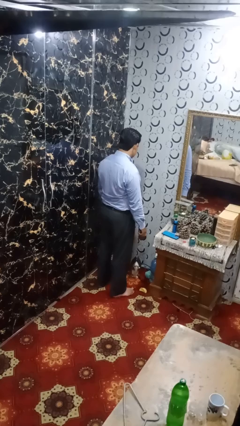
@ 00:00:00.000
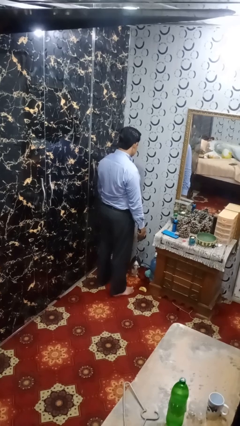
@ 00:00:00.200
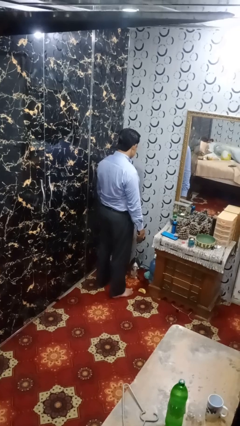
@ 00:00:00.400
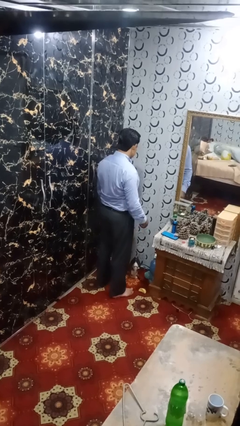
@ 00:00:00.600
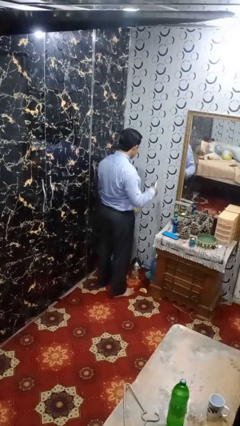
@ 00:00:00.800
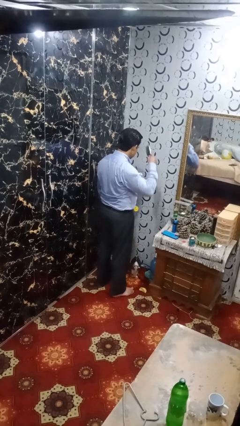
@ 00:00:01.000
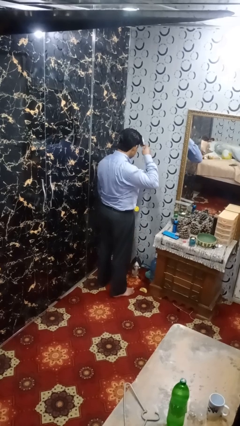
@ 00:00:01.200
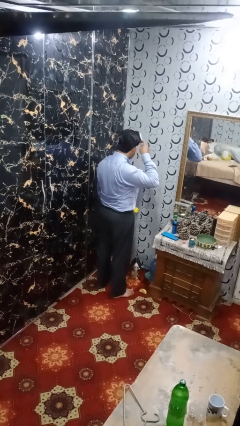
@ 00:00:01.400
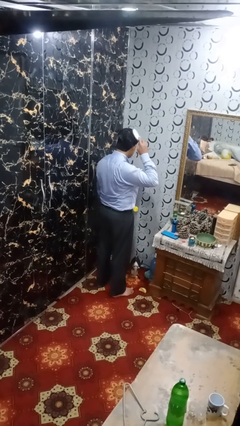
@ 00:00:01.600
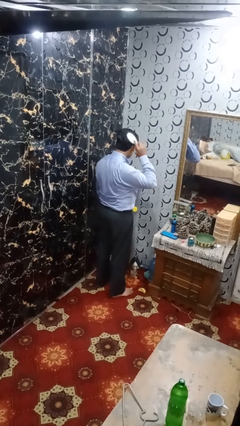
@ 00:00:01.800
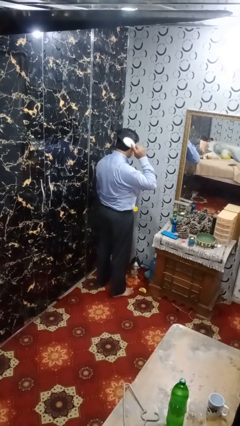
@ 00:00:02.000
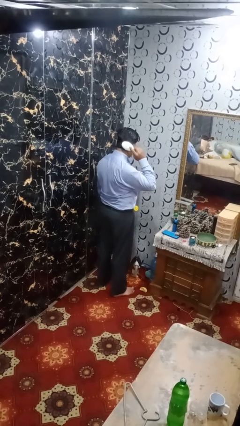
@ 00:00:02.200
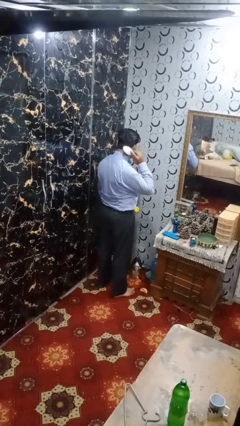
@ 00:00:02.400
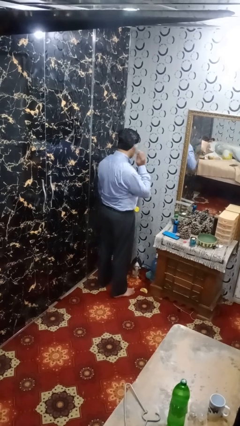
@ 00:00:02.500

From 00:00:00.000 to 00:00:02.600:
person brushes hair

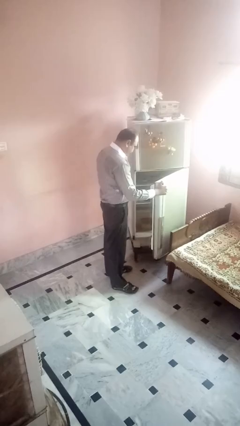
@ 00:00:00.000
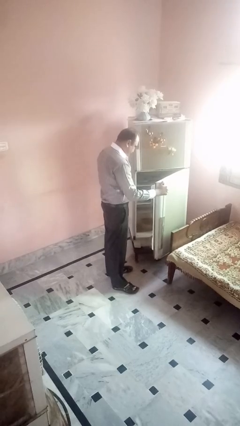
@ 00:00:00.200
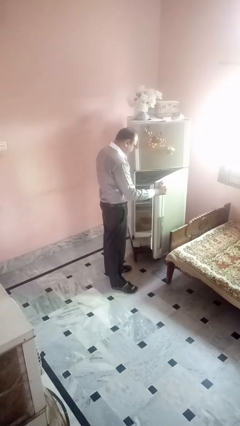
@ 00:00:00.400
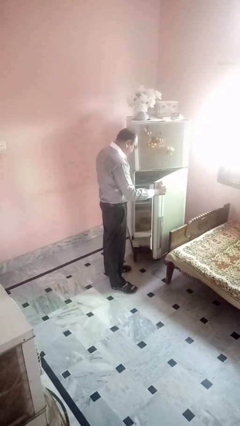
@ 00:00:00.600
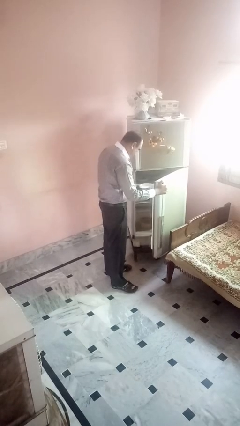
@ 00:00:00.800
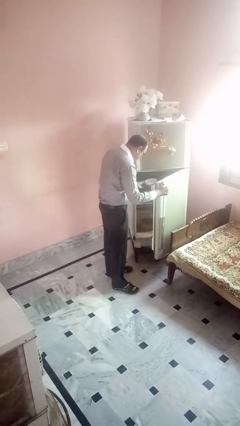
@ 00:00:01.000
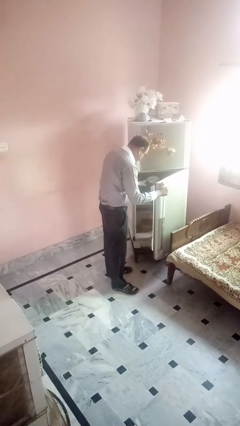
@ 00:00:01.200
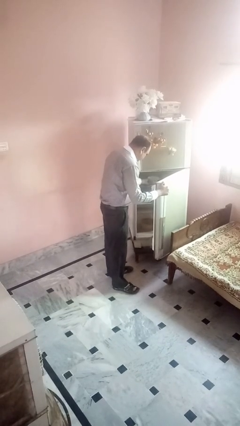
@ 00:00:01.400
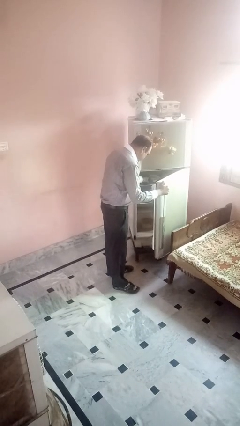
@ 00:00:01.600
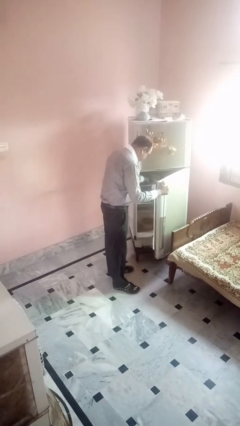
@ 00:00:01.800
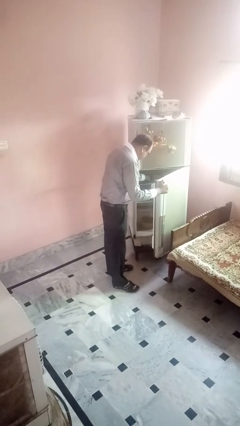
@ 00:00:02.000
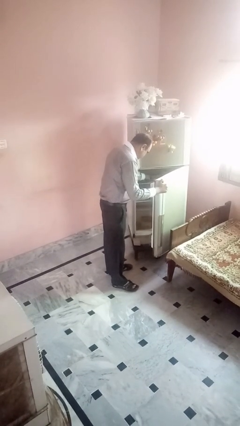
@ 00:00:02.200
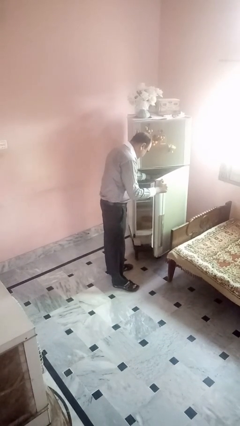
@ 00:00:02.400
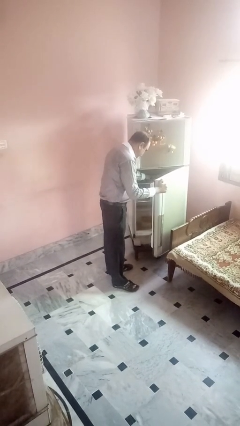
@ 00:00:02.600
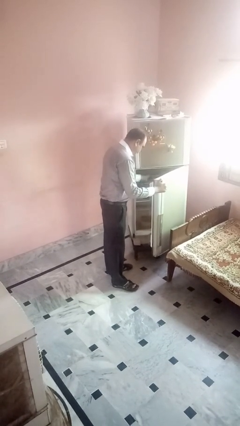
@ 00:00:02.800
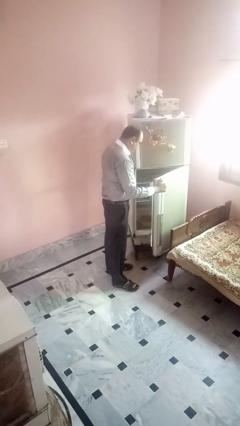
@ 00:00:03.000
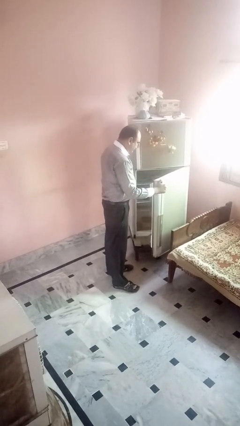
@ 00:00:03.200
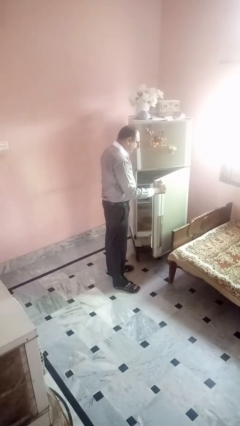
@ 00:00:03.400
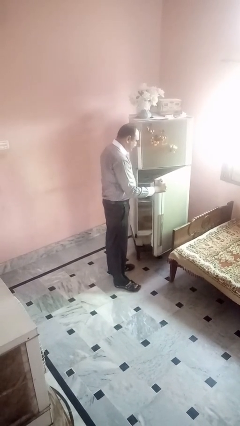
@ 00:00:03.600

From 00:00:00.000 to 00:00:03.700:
person puts object into refrigerator

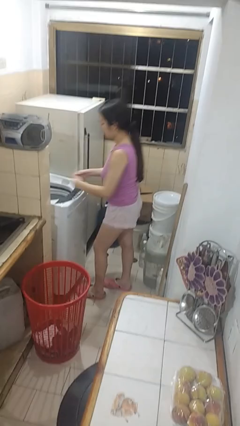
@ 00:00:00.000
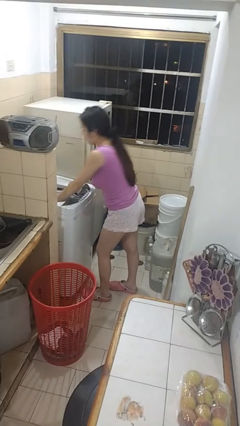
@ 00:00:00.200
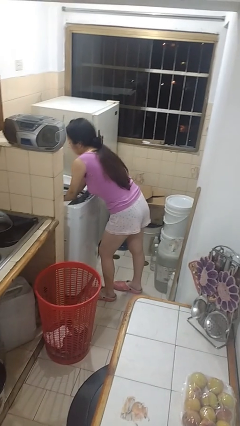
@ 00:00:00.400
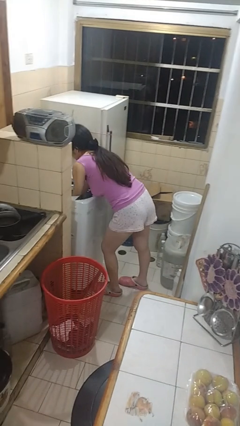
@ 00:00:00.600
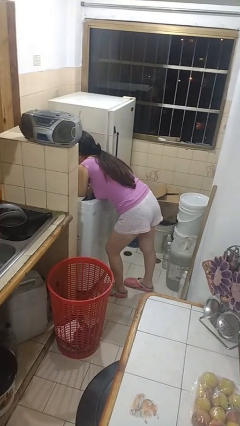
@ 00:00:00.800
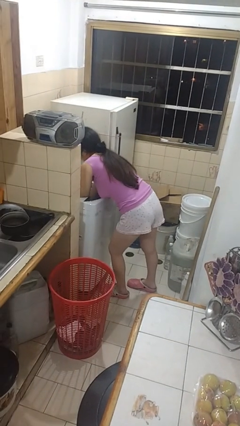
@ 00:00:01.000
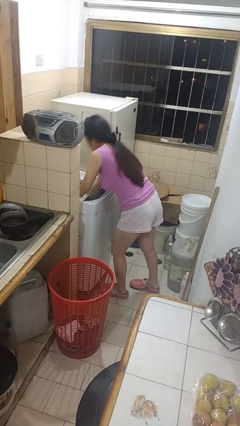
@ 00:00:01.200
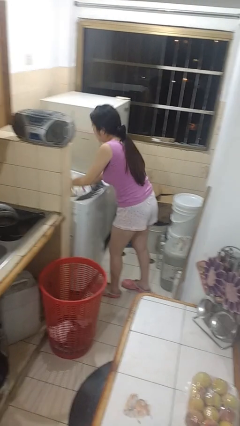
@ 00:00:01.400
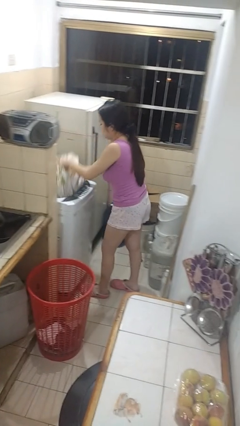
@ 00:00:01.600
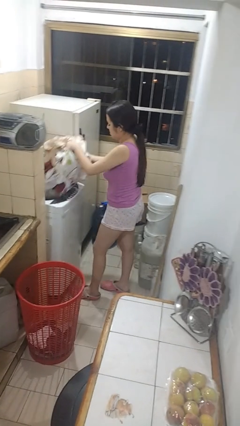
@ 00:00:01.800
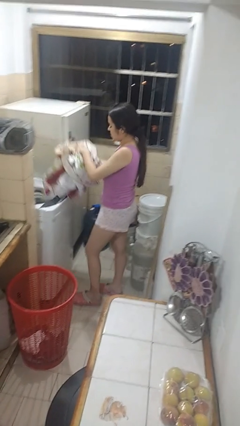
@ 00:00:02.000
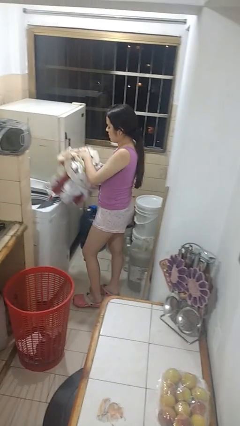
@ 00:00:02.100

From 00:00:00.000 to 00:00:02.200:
person unloads clotheswasher

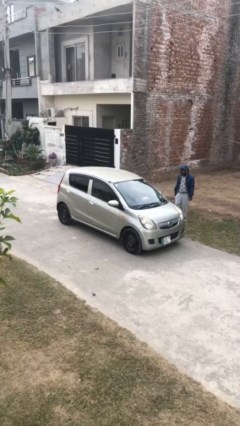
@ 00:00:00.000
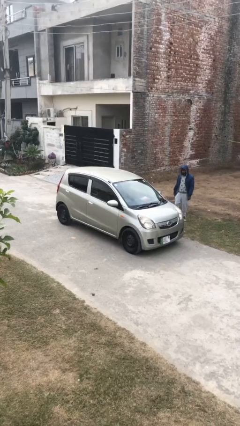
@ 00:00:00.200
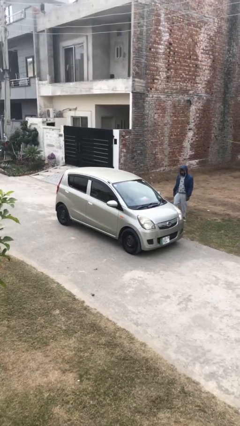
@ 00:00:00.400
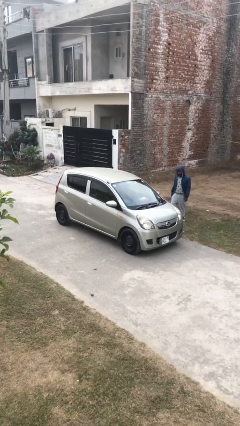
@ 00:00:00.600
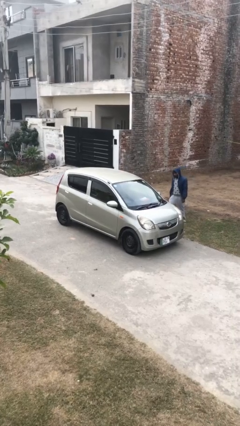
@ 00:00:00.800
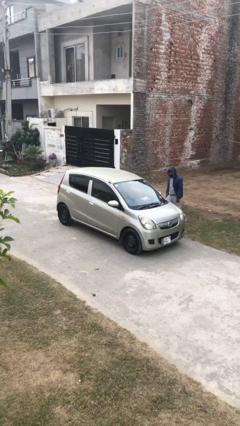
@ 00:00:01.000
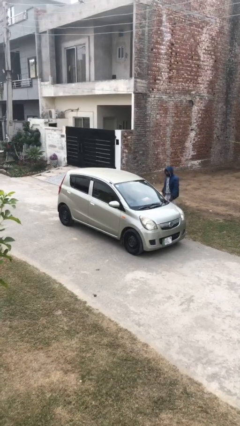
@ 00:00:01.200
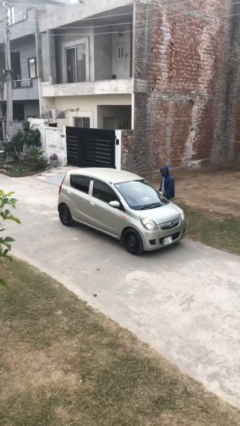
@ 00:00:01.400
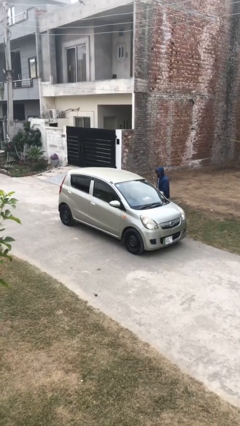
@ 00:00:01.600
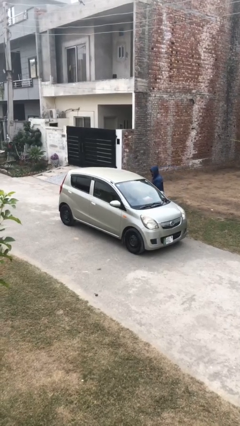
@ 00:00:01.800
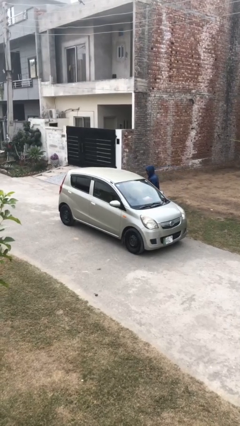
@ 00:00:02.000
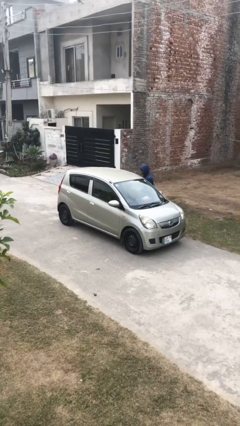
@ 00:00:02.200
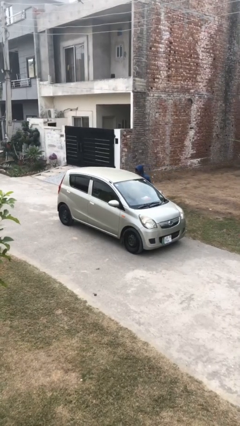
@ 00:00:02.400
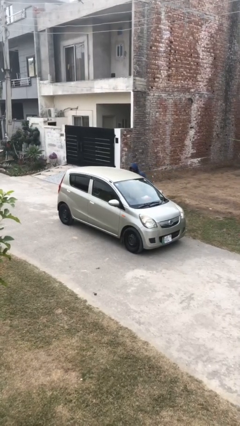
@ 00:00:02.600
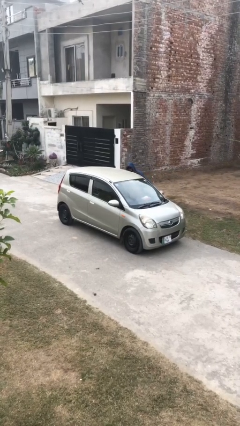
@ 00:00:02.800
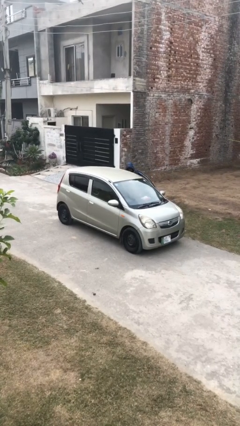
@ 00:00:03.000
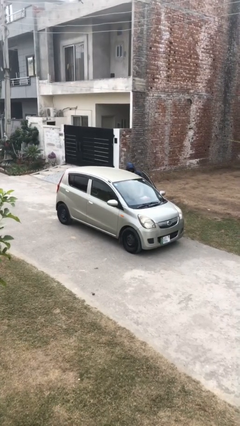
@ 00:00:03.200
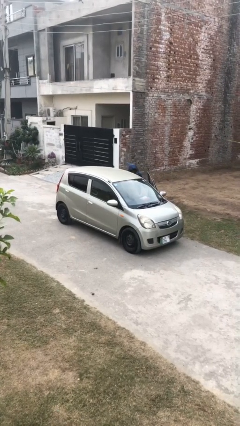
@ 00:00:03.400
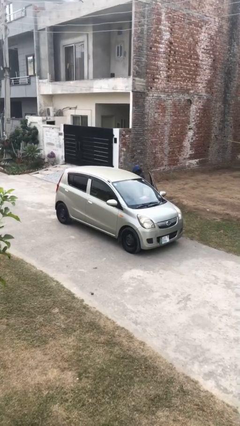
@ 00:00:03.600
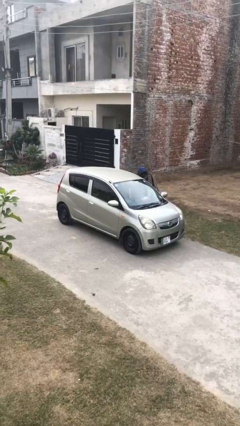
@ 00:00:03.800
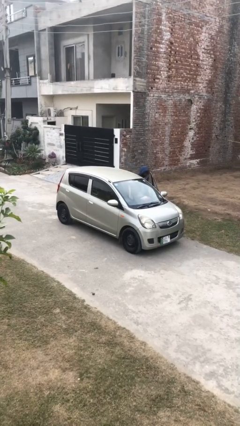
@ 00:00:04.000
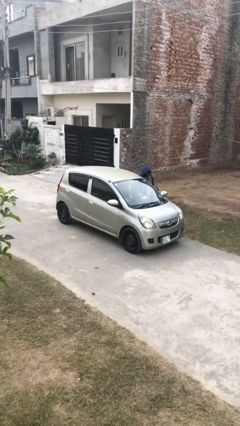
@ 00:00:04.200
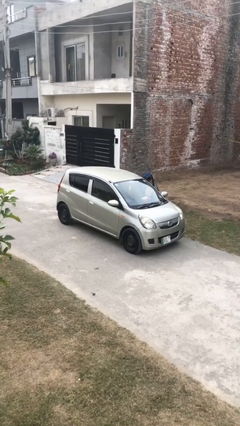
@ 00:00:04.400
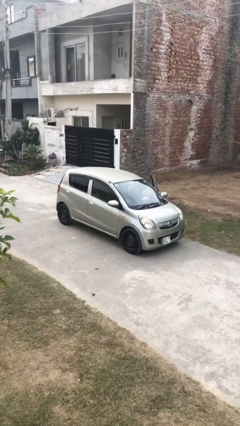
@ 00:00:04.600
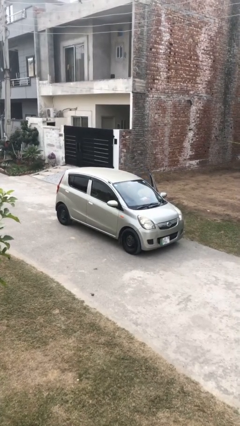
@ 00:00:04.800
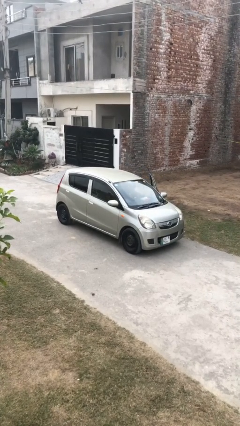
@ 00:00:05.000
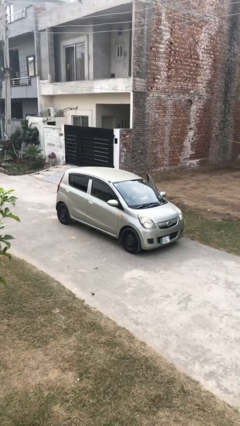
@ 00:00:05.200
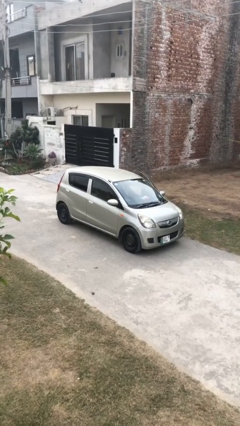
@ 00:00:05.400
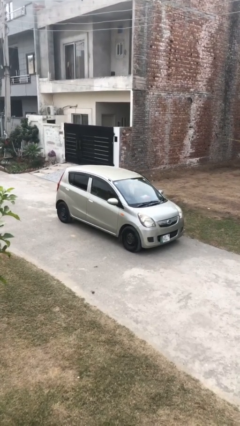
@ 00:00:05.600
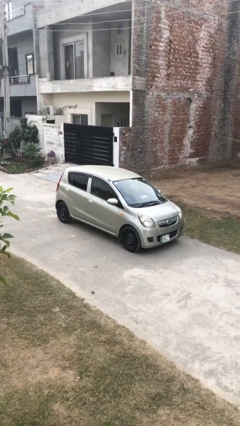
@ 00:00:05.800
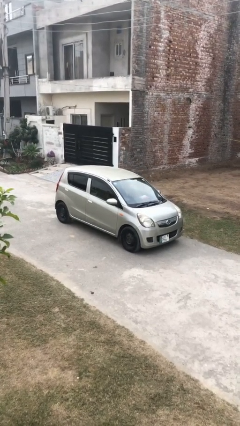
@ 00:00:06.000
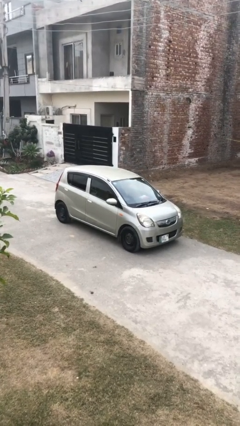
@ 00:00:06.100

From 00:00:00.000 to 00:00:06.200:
car picks up person

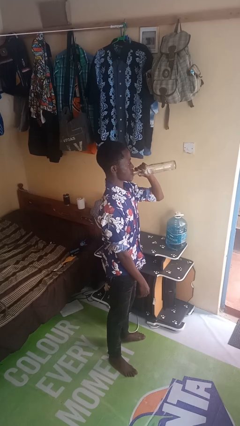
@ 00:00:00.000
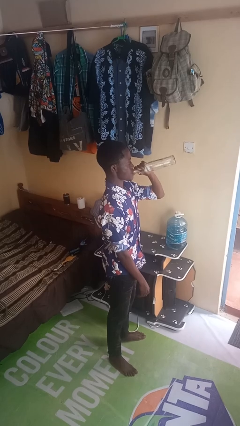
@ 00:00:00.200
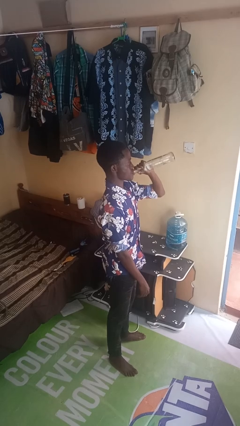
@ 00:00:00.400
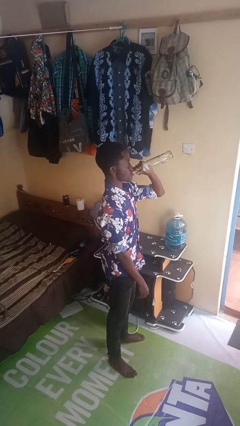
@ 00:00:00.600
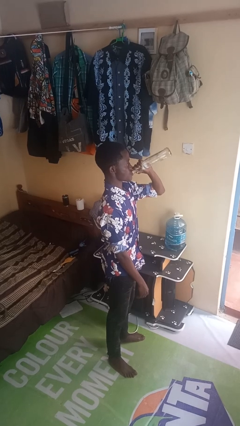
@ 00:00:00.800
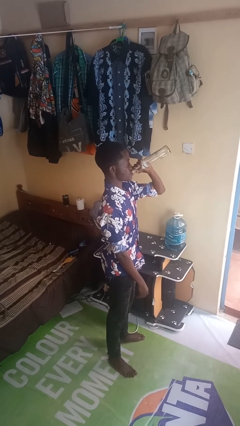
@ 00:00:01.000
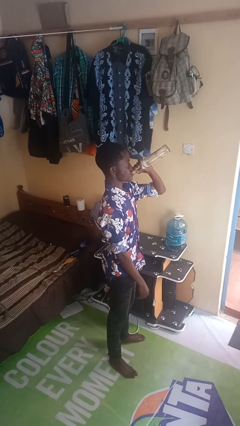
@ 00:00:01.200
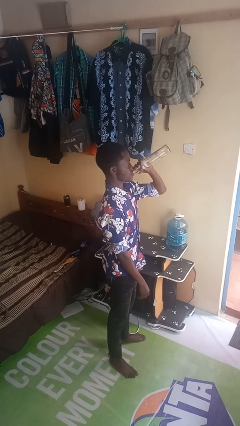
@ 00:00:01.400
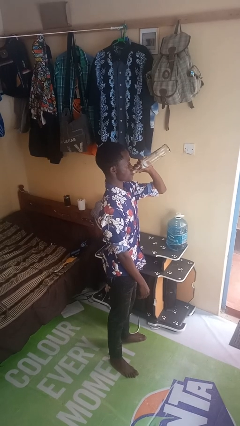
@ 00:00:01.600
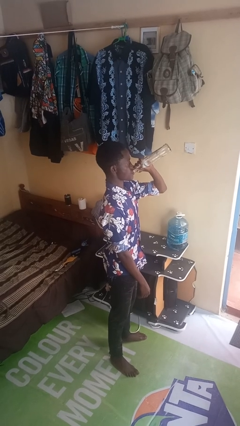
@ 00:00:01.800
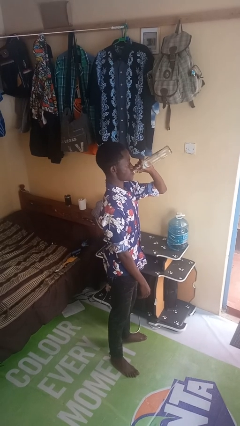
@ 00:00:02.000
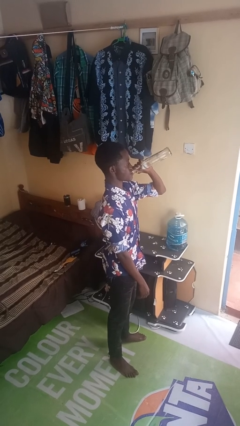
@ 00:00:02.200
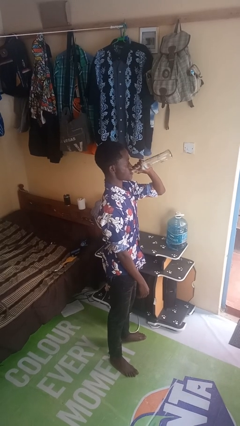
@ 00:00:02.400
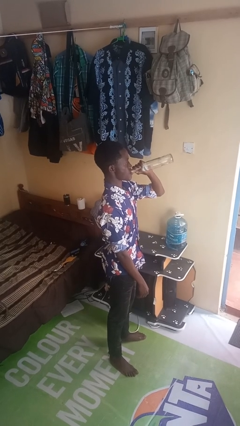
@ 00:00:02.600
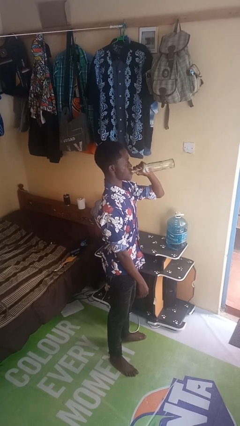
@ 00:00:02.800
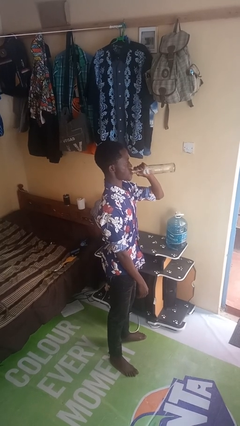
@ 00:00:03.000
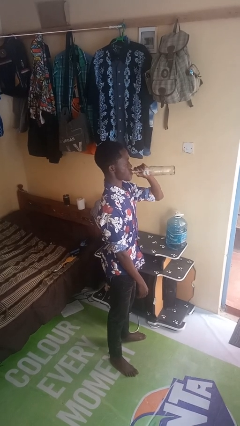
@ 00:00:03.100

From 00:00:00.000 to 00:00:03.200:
person drinks from bottle
